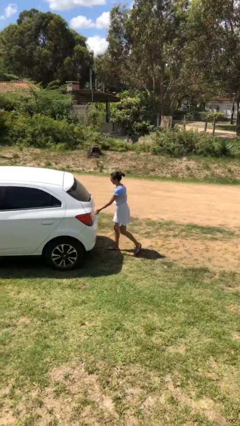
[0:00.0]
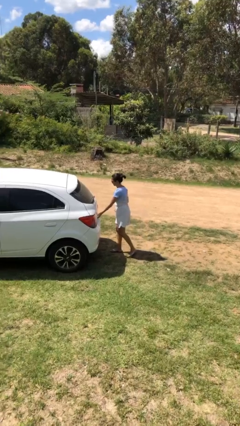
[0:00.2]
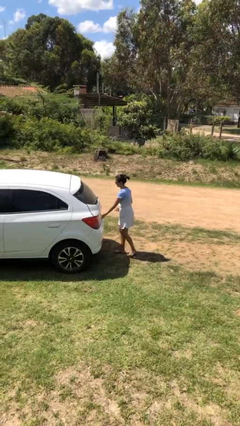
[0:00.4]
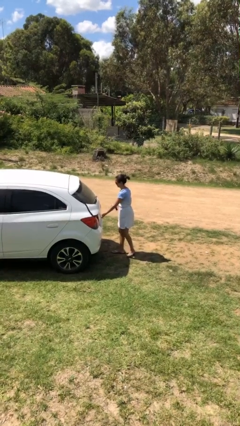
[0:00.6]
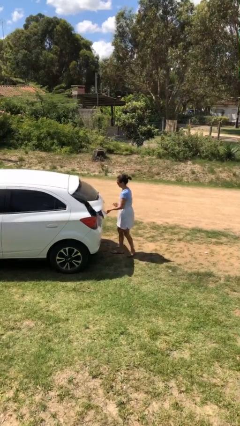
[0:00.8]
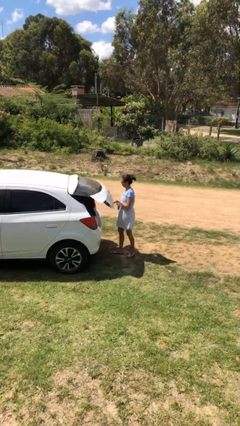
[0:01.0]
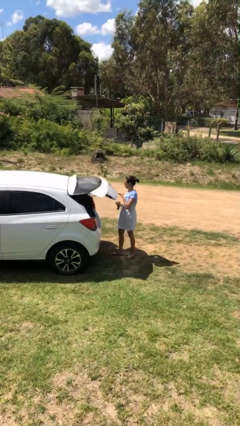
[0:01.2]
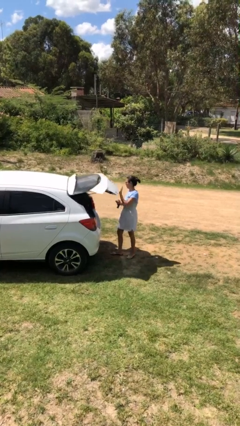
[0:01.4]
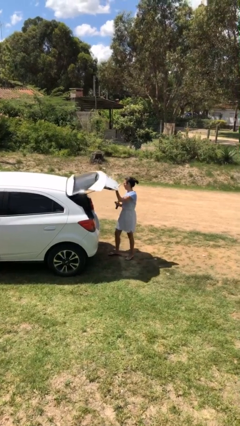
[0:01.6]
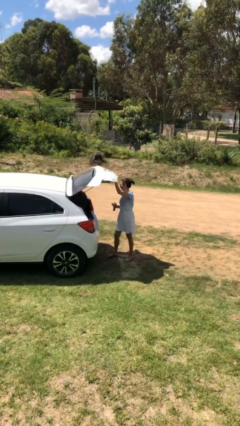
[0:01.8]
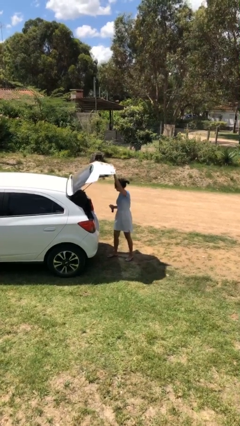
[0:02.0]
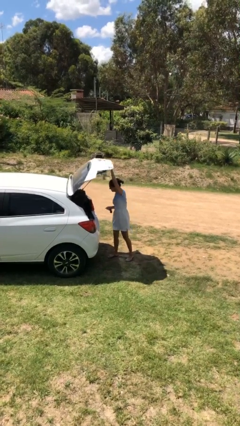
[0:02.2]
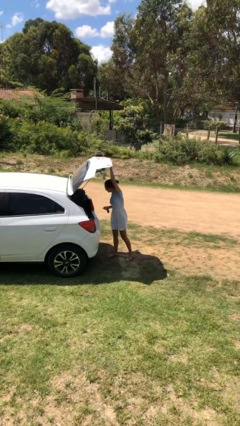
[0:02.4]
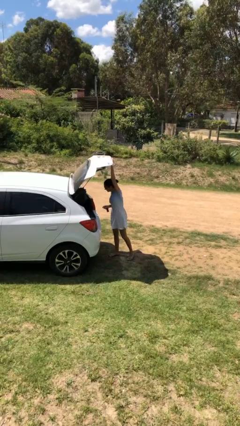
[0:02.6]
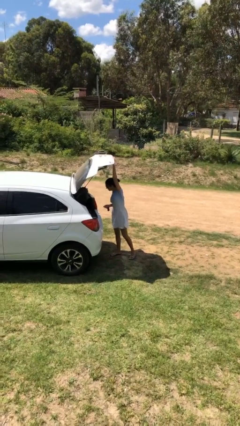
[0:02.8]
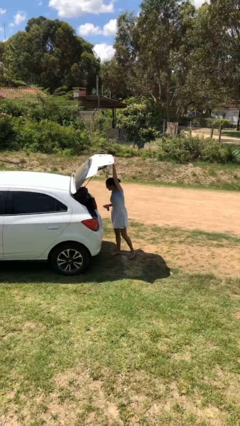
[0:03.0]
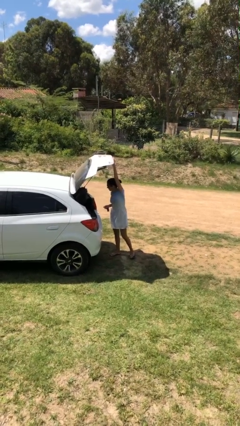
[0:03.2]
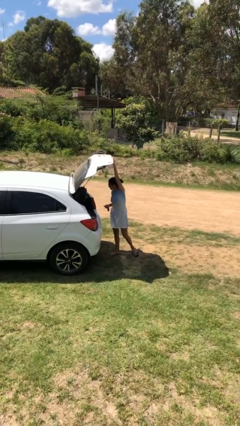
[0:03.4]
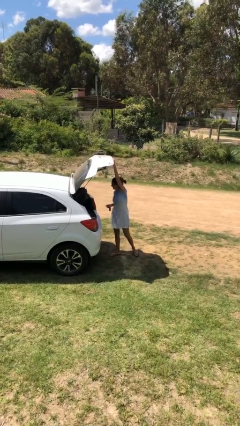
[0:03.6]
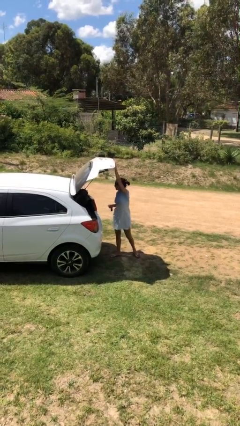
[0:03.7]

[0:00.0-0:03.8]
person opens car trunk

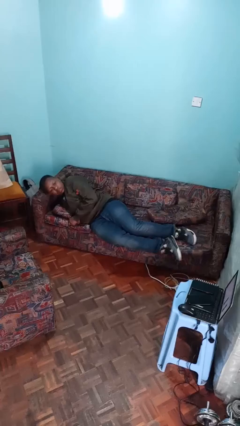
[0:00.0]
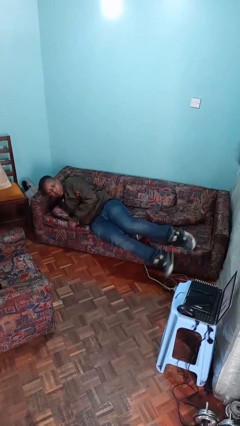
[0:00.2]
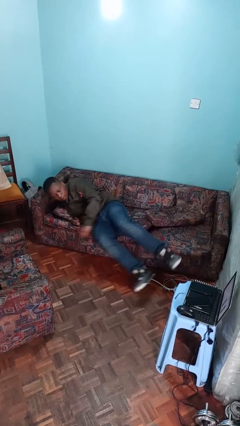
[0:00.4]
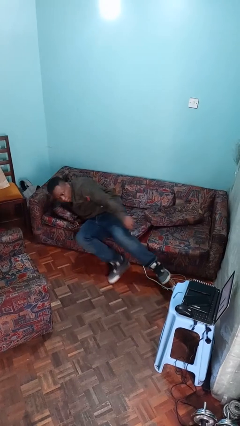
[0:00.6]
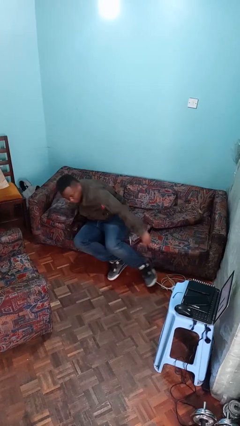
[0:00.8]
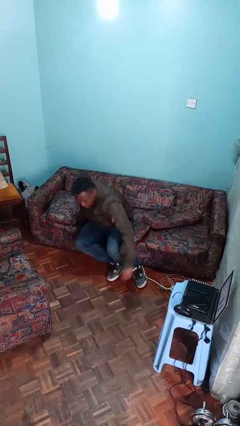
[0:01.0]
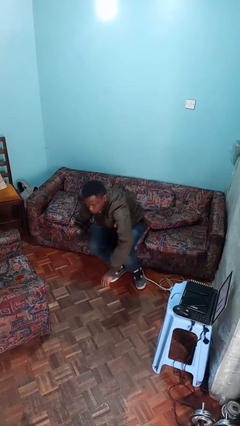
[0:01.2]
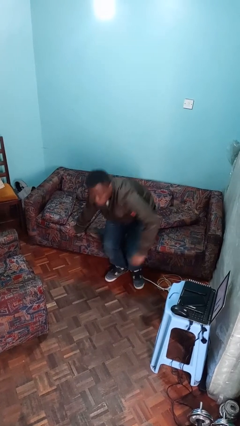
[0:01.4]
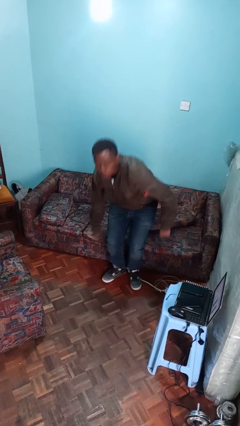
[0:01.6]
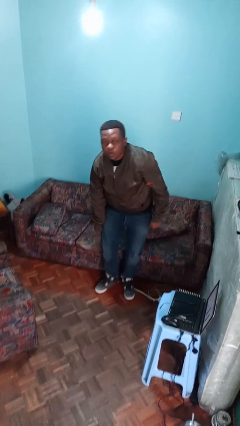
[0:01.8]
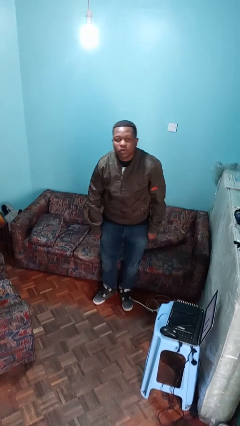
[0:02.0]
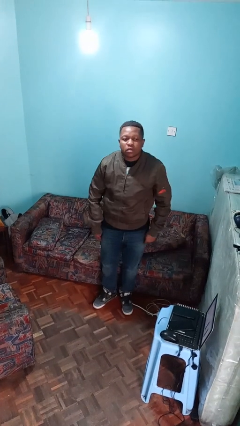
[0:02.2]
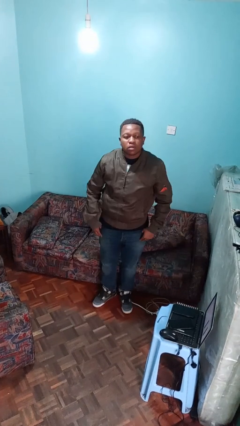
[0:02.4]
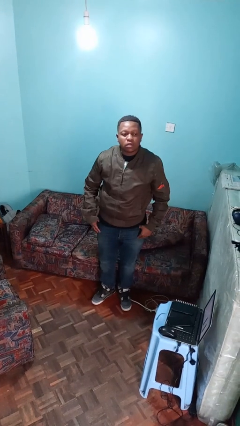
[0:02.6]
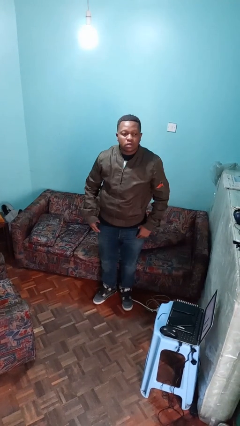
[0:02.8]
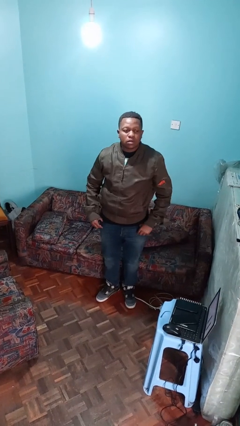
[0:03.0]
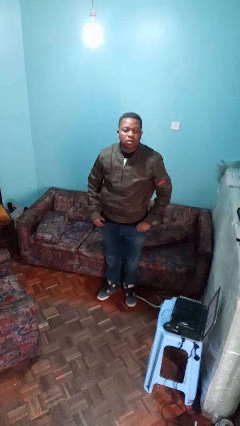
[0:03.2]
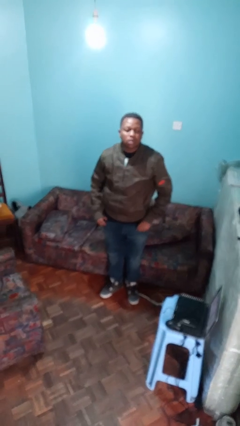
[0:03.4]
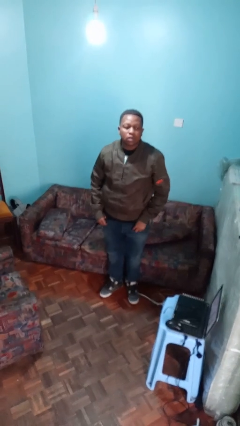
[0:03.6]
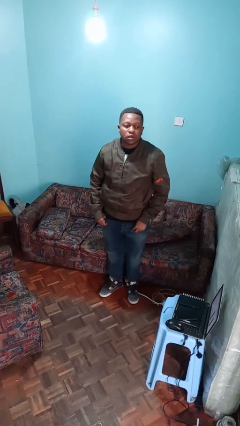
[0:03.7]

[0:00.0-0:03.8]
person stands up

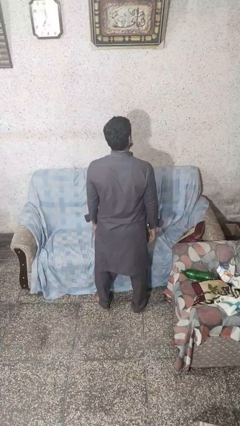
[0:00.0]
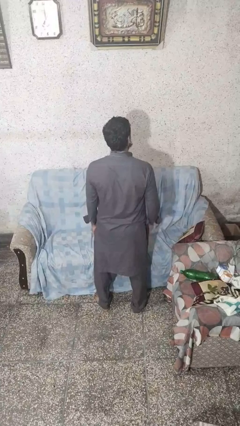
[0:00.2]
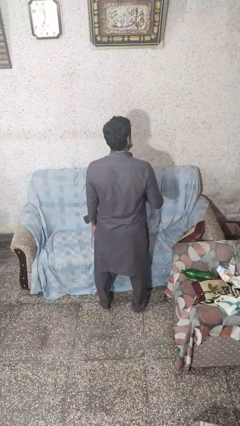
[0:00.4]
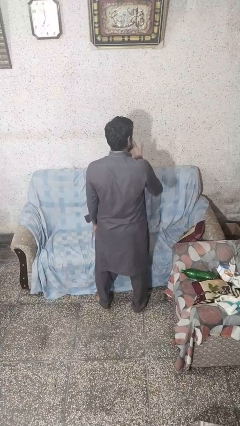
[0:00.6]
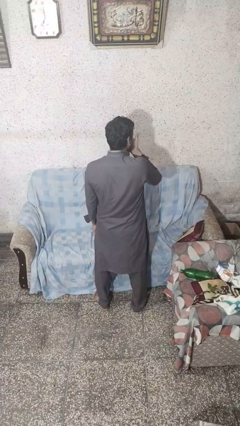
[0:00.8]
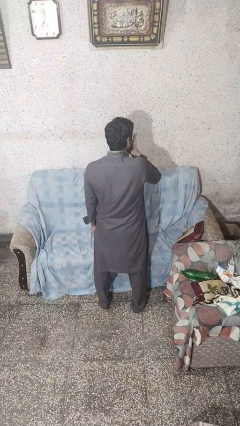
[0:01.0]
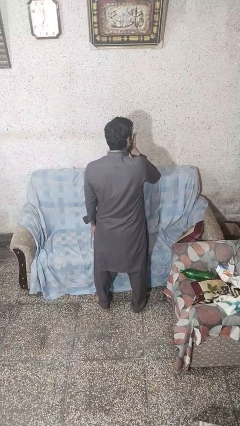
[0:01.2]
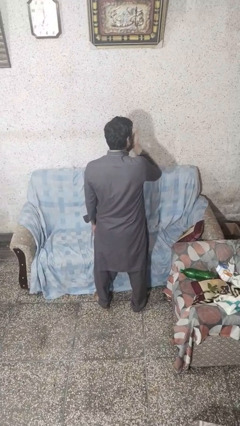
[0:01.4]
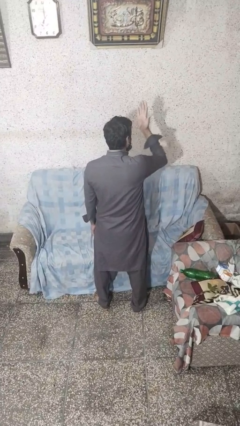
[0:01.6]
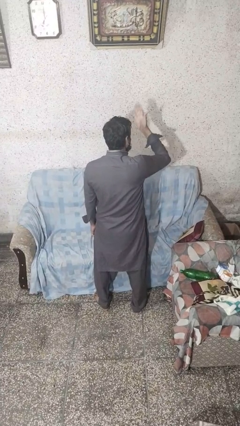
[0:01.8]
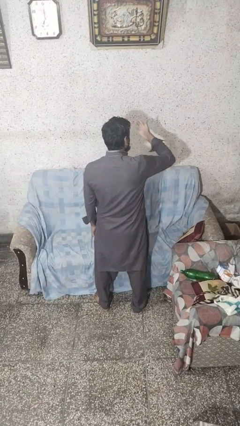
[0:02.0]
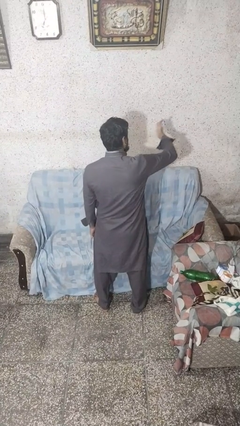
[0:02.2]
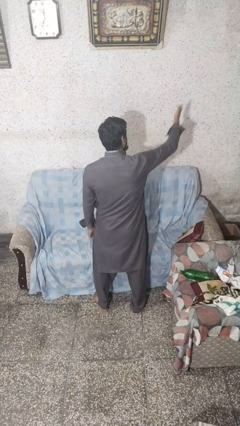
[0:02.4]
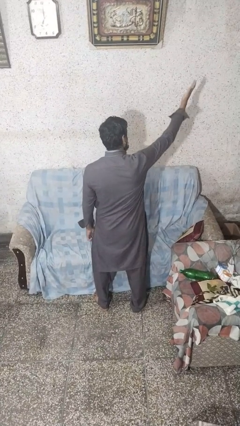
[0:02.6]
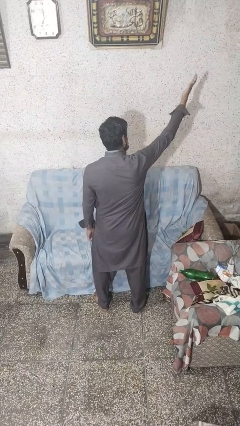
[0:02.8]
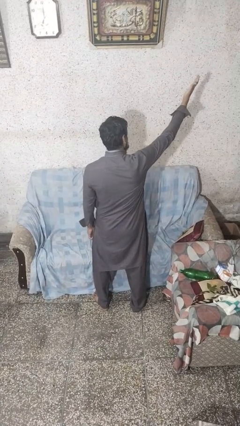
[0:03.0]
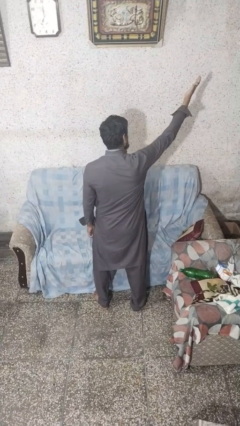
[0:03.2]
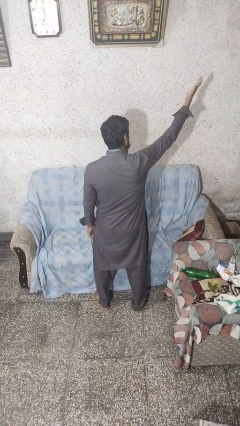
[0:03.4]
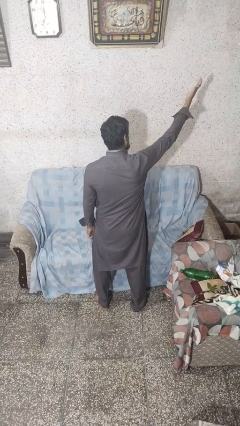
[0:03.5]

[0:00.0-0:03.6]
person gestures blow kiss

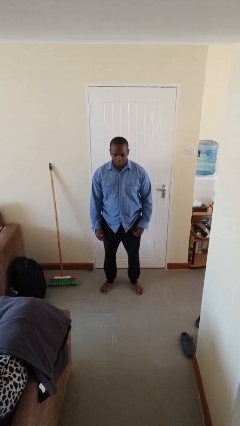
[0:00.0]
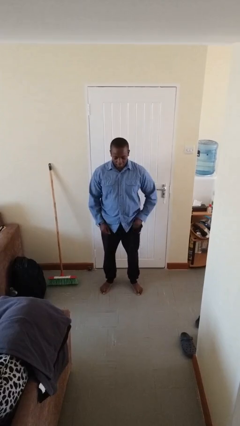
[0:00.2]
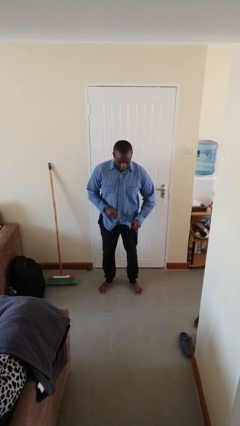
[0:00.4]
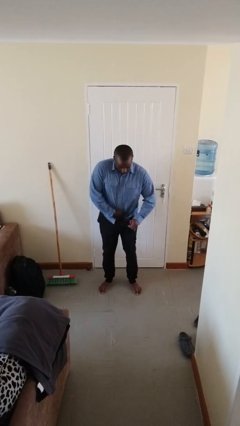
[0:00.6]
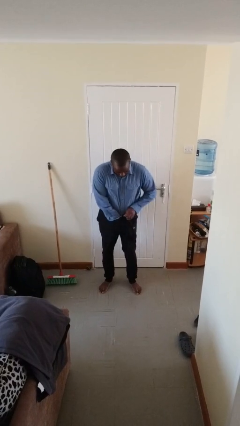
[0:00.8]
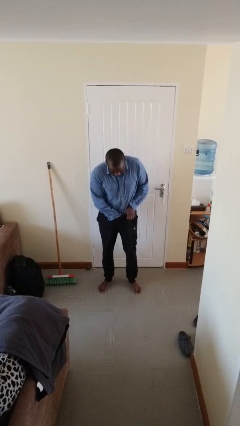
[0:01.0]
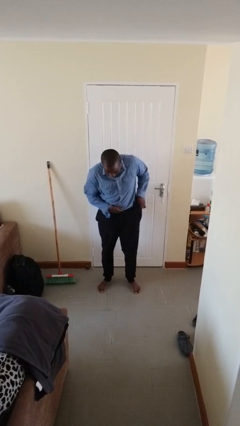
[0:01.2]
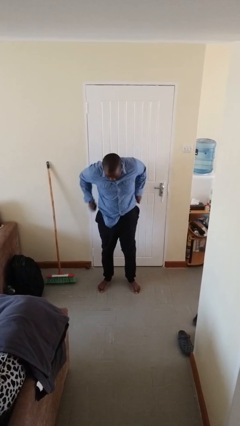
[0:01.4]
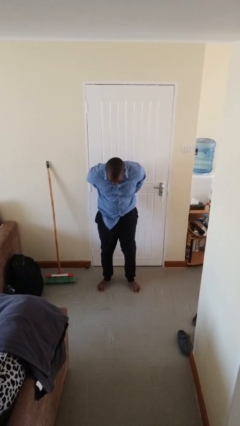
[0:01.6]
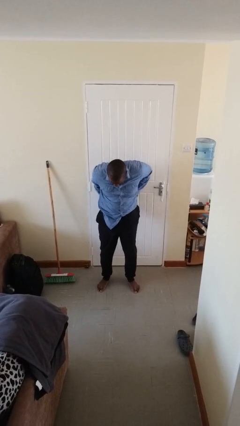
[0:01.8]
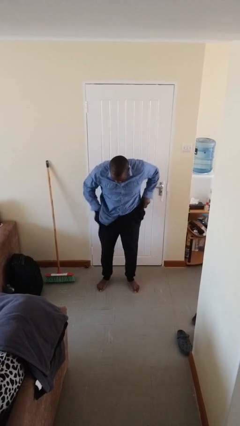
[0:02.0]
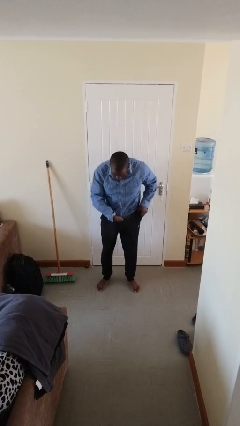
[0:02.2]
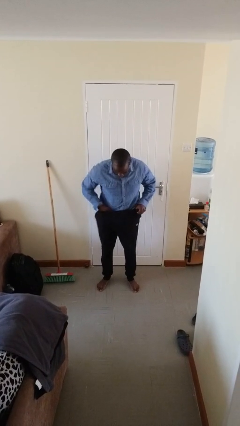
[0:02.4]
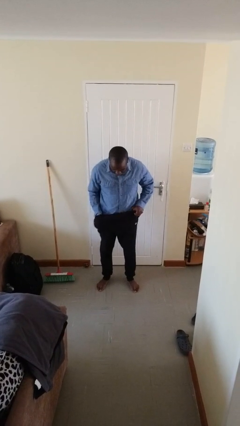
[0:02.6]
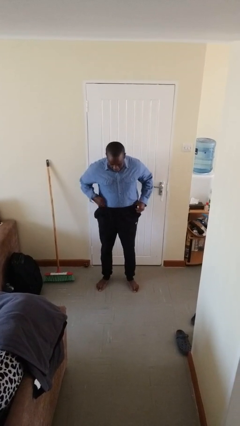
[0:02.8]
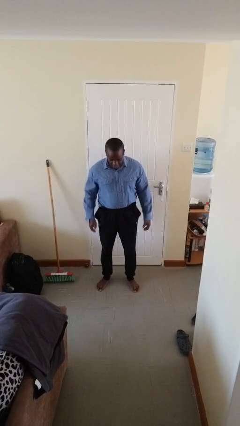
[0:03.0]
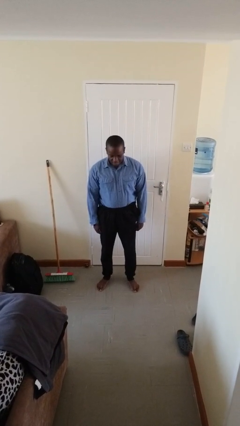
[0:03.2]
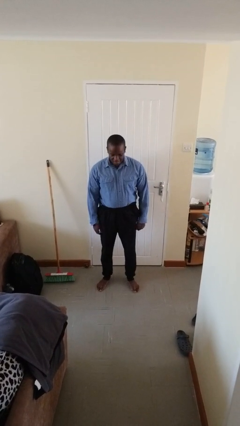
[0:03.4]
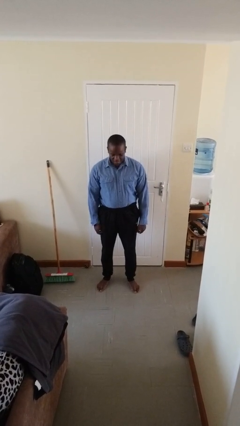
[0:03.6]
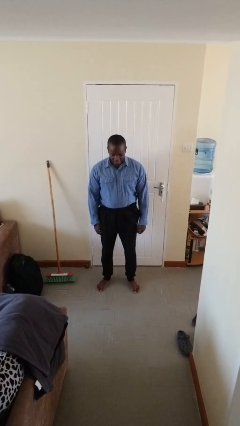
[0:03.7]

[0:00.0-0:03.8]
person tucks in shirt

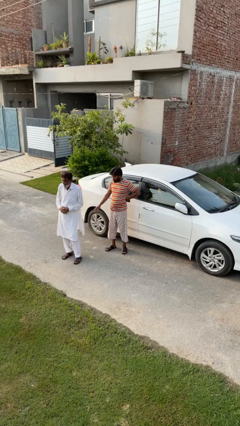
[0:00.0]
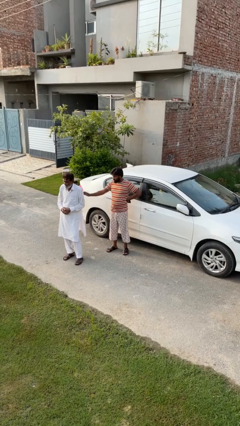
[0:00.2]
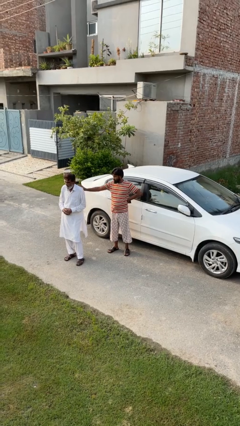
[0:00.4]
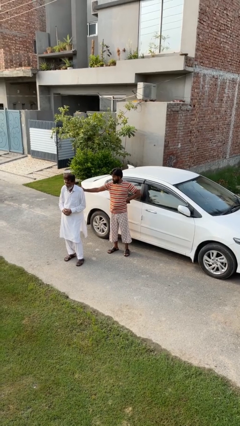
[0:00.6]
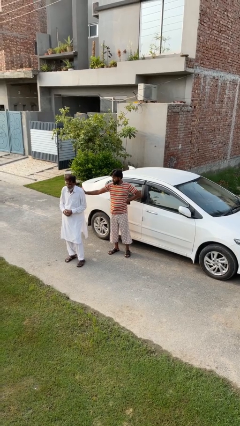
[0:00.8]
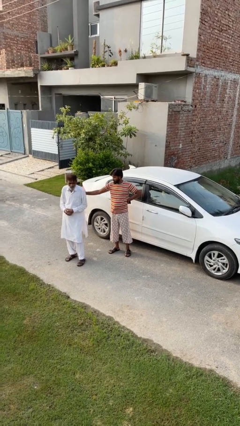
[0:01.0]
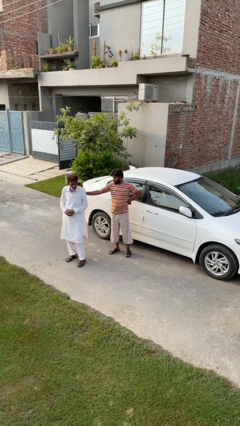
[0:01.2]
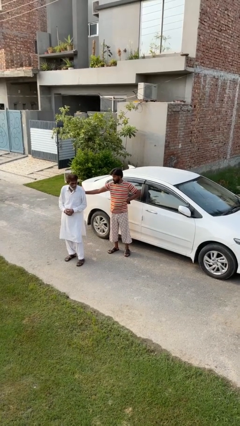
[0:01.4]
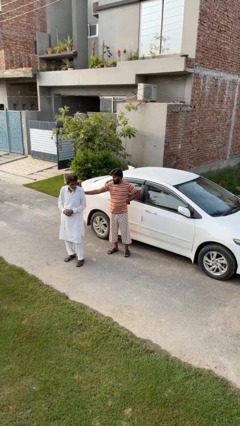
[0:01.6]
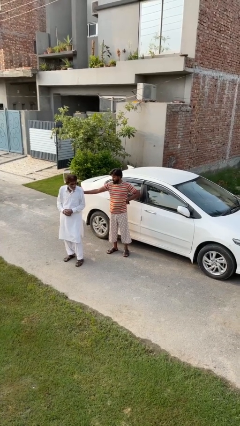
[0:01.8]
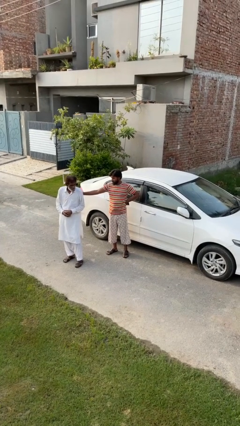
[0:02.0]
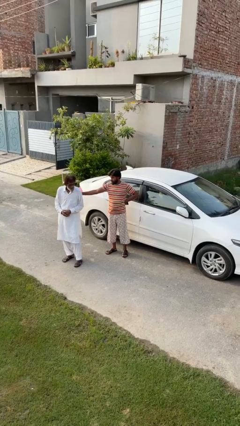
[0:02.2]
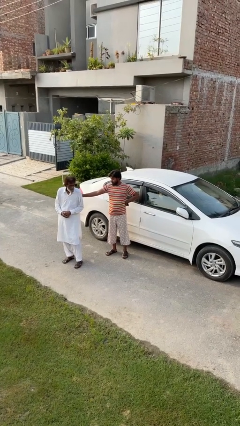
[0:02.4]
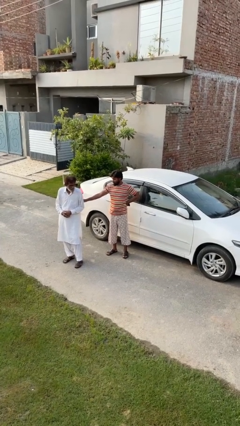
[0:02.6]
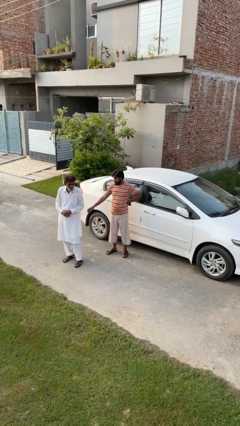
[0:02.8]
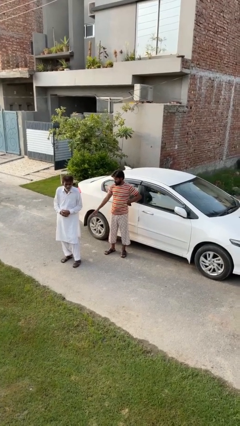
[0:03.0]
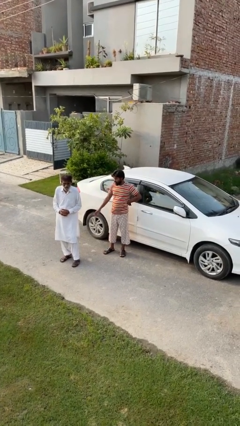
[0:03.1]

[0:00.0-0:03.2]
person touches back of person
